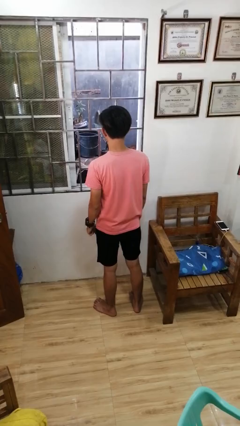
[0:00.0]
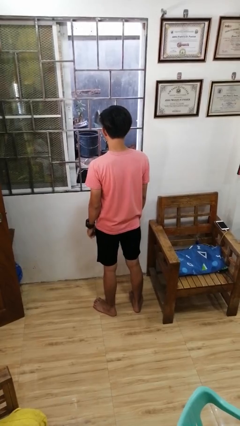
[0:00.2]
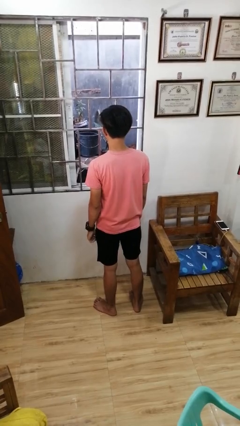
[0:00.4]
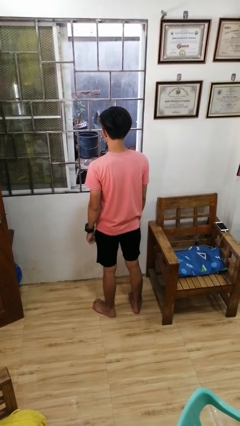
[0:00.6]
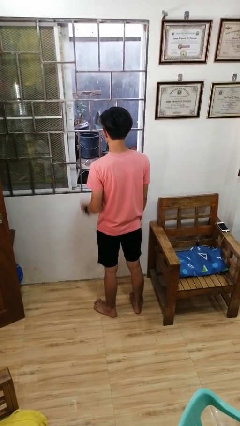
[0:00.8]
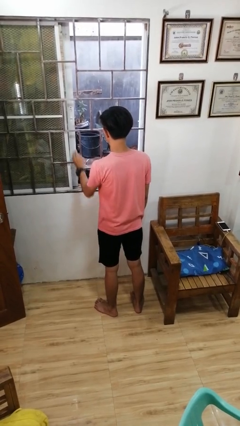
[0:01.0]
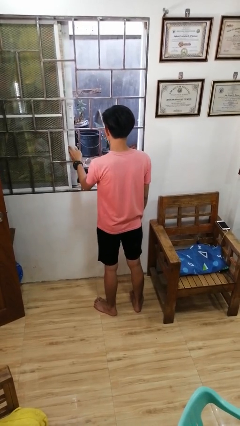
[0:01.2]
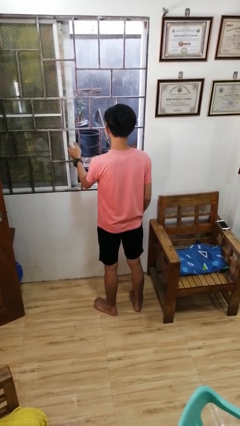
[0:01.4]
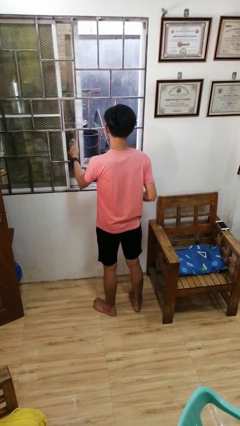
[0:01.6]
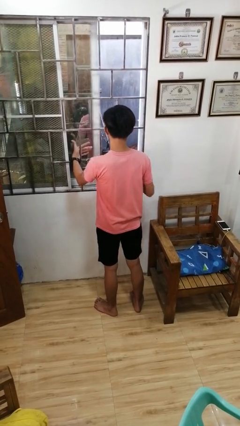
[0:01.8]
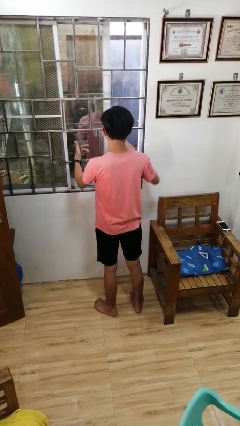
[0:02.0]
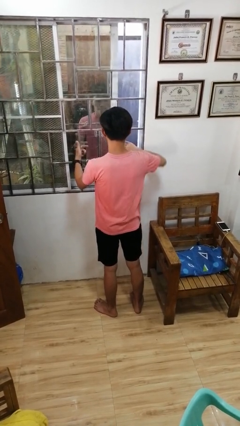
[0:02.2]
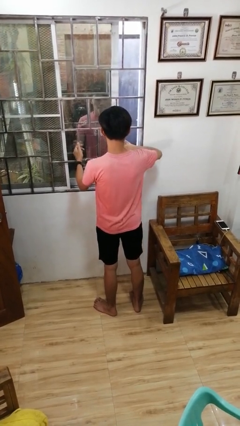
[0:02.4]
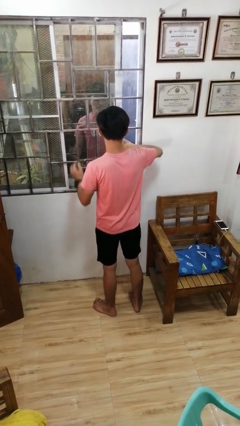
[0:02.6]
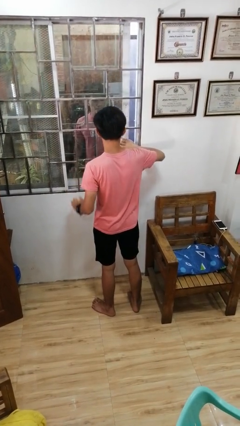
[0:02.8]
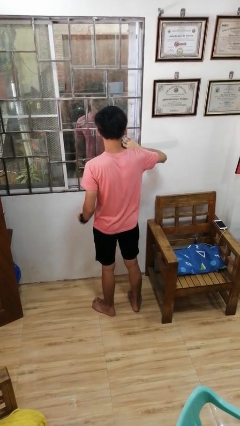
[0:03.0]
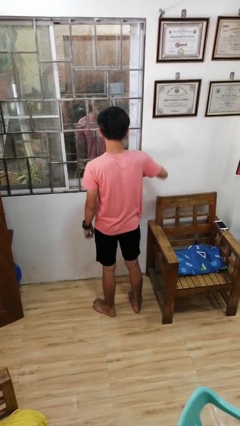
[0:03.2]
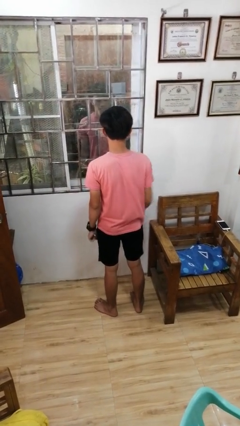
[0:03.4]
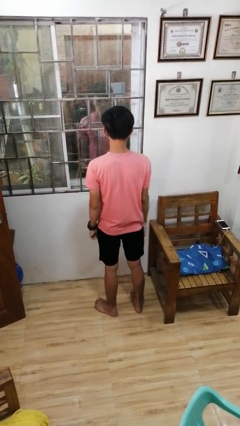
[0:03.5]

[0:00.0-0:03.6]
person closes home window

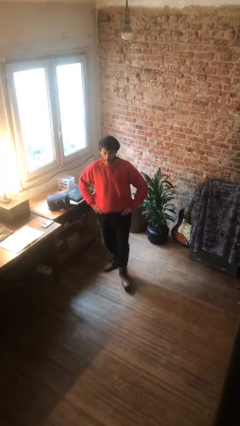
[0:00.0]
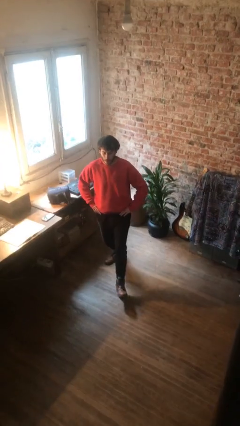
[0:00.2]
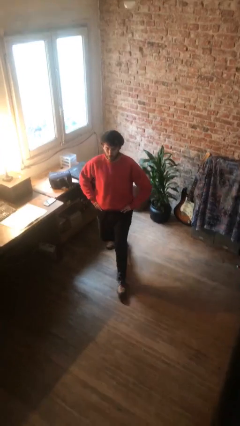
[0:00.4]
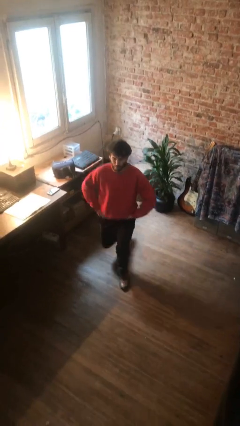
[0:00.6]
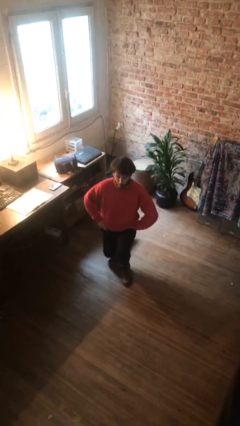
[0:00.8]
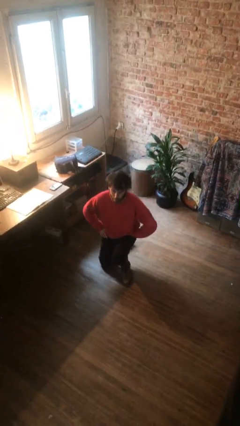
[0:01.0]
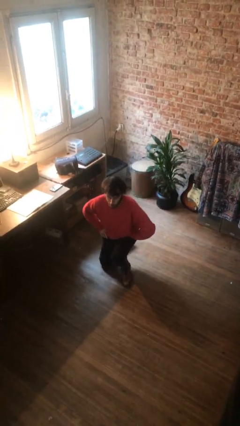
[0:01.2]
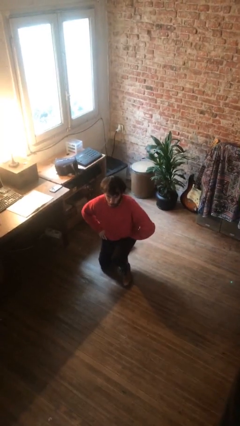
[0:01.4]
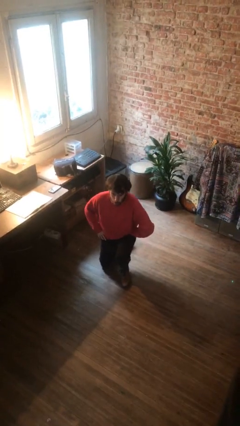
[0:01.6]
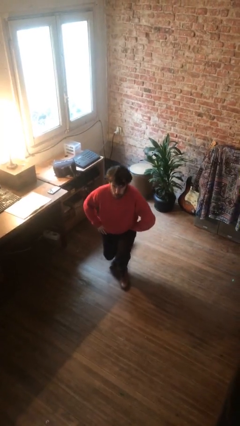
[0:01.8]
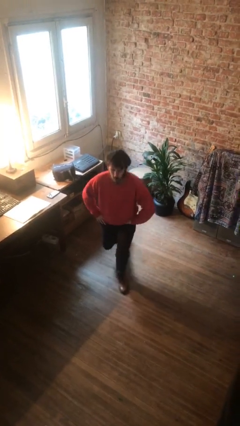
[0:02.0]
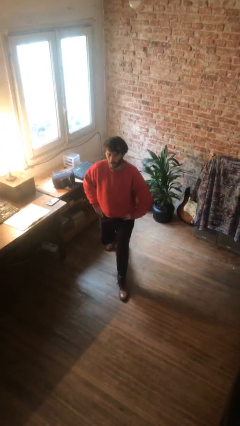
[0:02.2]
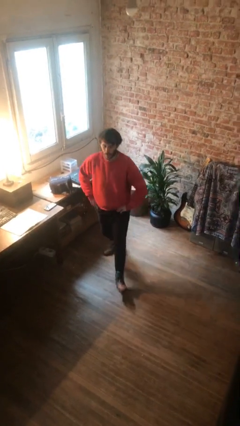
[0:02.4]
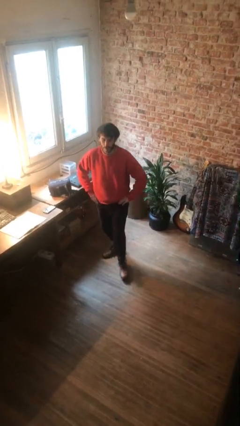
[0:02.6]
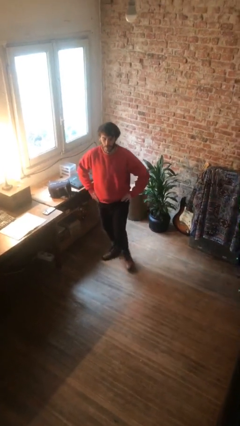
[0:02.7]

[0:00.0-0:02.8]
person exercises with lunges

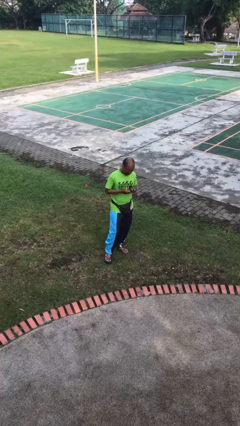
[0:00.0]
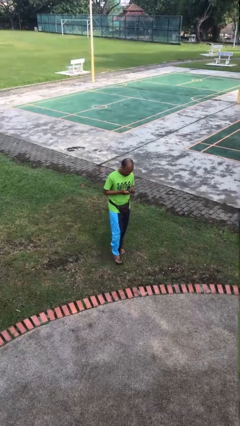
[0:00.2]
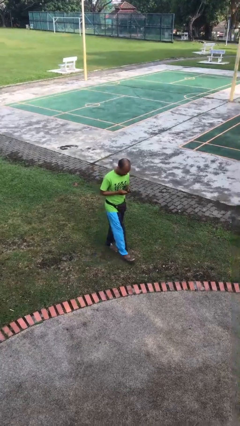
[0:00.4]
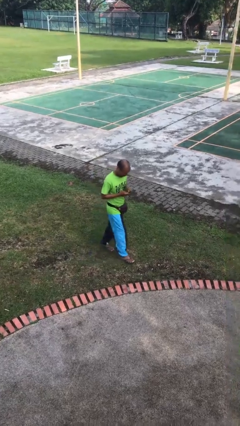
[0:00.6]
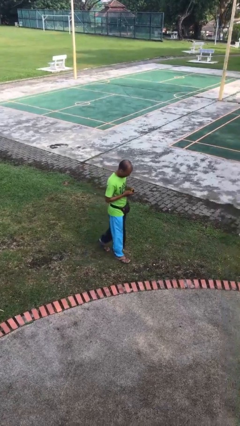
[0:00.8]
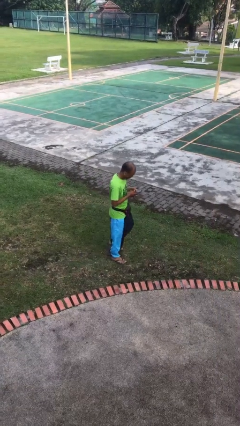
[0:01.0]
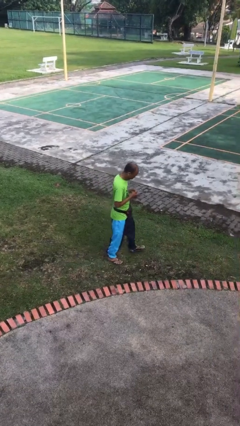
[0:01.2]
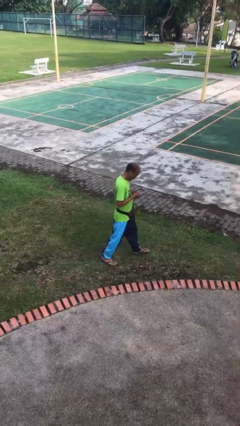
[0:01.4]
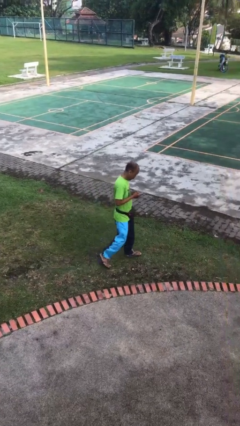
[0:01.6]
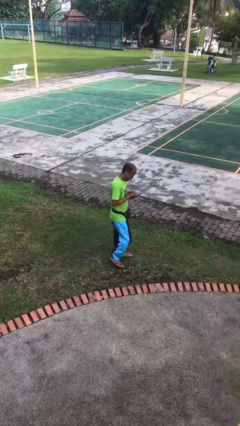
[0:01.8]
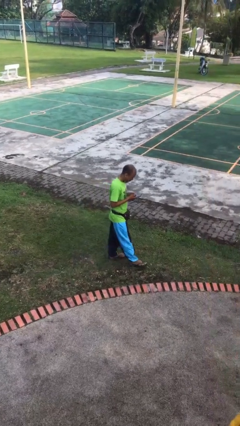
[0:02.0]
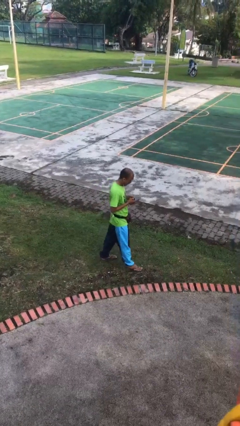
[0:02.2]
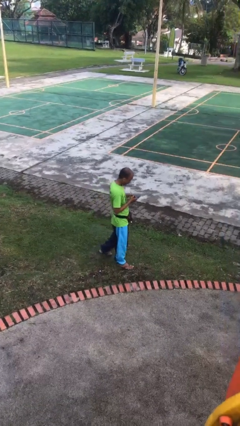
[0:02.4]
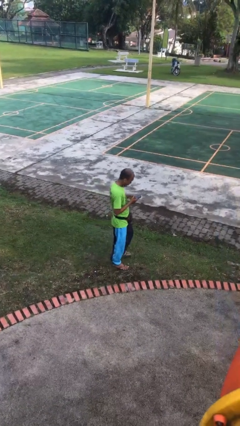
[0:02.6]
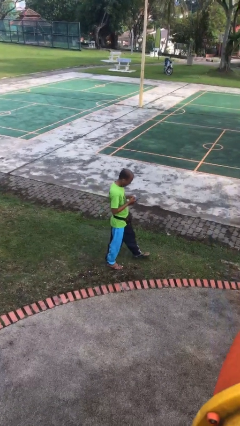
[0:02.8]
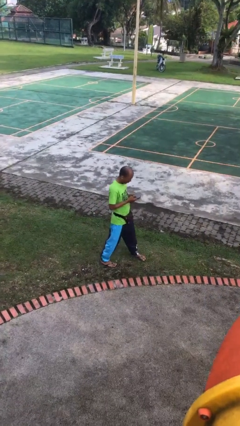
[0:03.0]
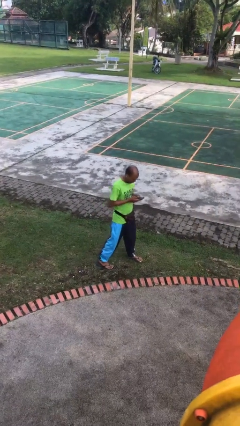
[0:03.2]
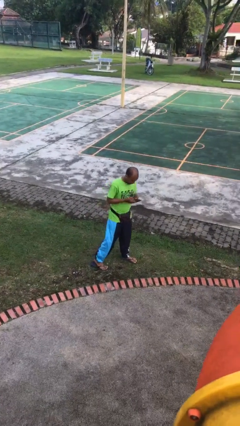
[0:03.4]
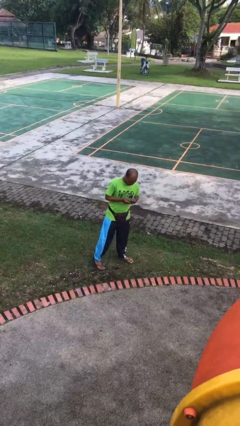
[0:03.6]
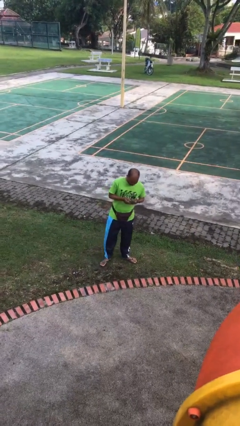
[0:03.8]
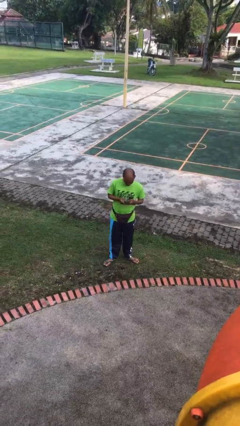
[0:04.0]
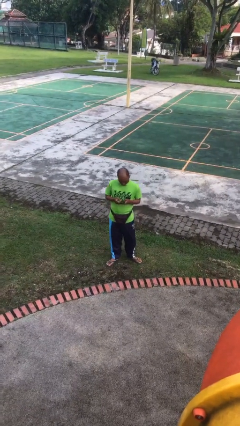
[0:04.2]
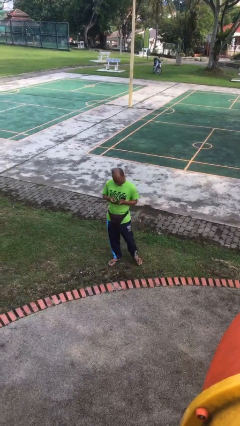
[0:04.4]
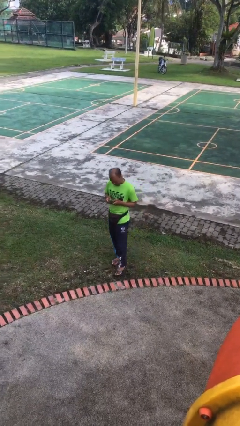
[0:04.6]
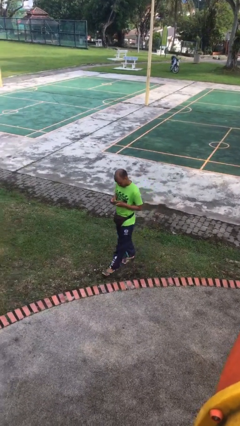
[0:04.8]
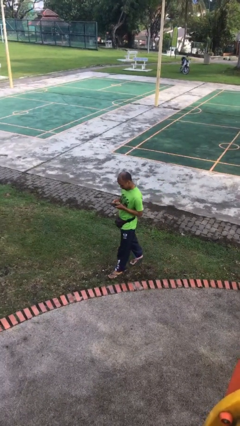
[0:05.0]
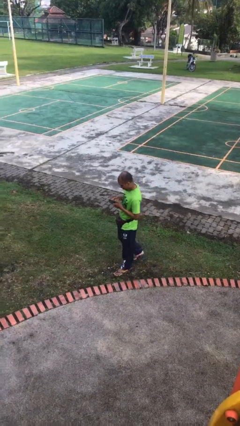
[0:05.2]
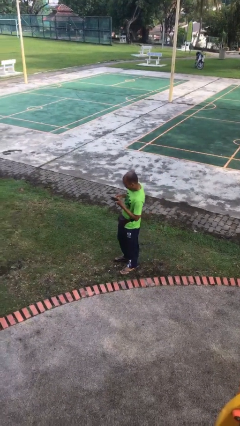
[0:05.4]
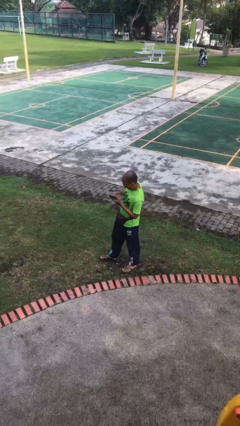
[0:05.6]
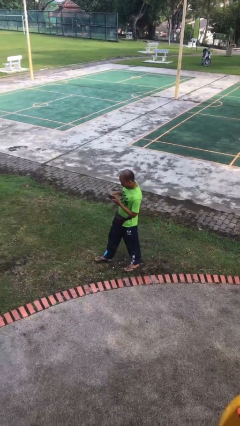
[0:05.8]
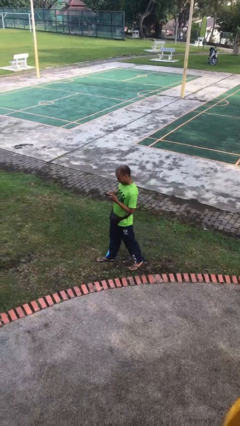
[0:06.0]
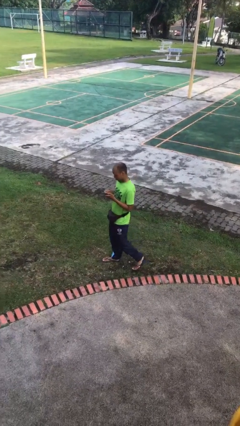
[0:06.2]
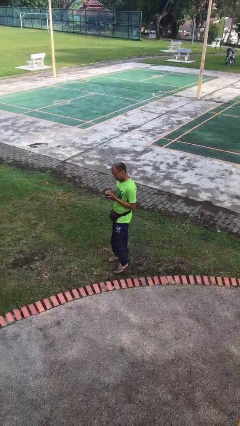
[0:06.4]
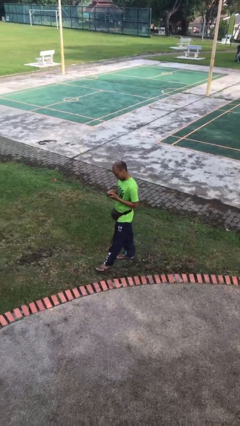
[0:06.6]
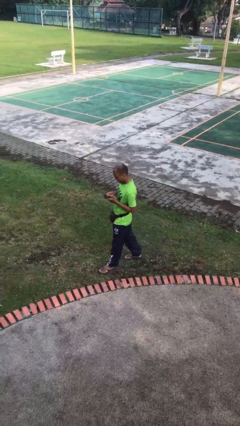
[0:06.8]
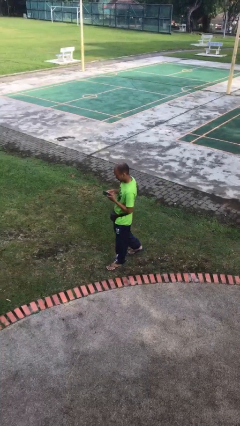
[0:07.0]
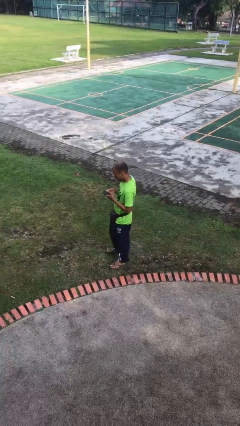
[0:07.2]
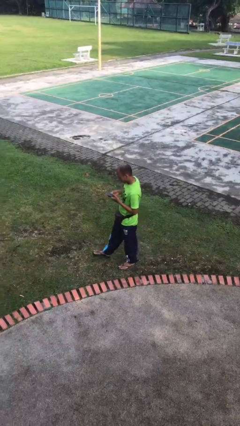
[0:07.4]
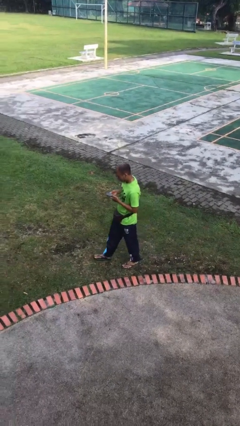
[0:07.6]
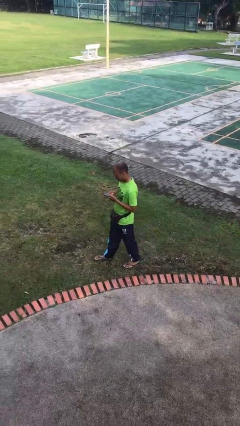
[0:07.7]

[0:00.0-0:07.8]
person texts on phone

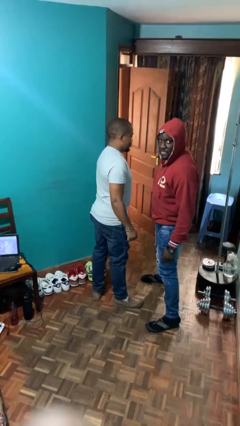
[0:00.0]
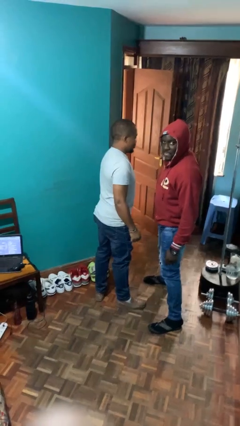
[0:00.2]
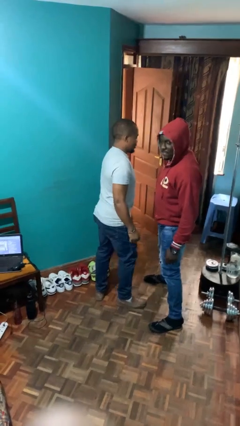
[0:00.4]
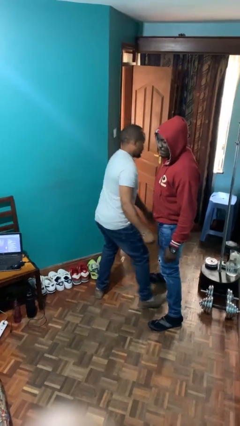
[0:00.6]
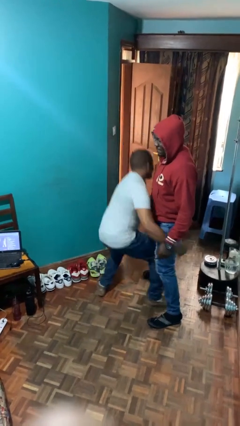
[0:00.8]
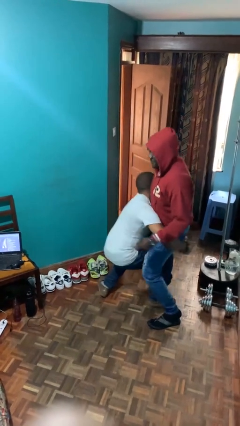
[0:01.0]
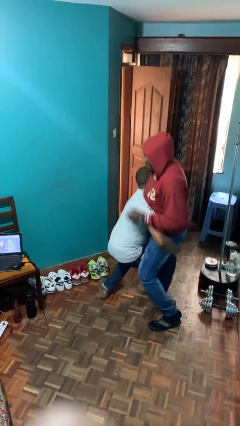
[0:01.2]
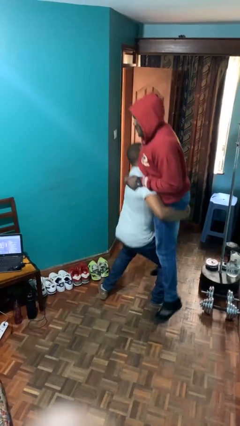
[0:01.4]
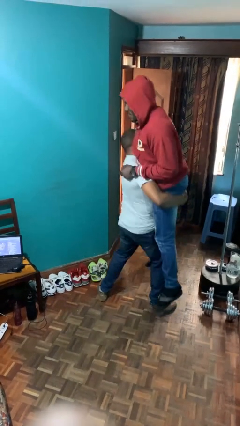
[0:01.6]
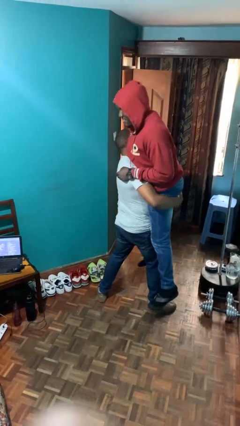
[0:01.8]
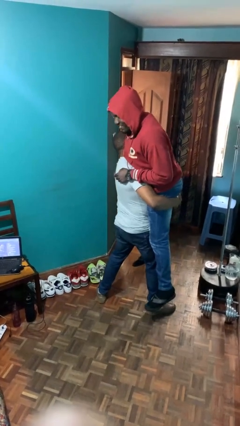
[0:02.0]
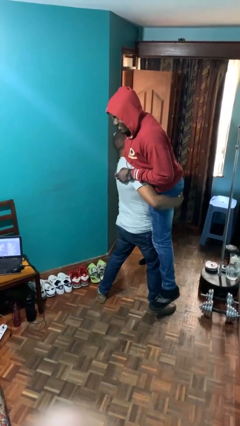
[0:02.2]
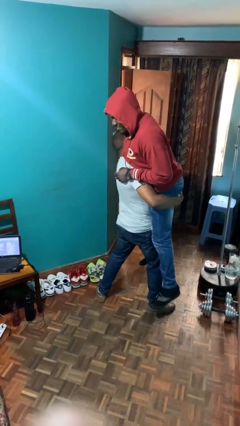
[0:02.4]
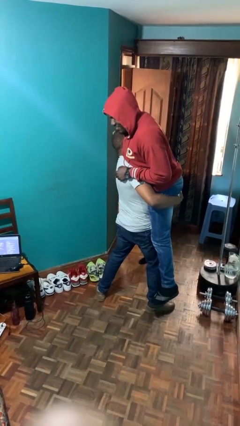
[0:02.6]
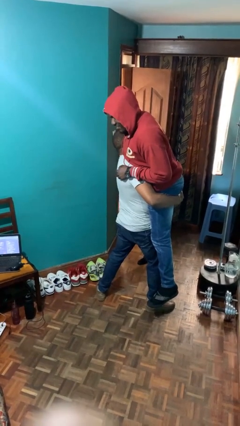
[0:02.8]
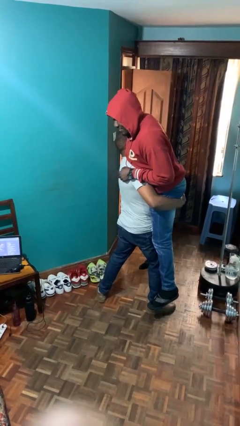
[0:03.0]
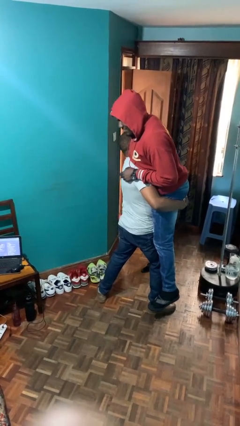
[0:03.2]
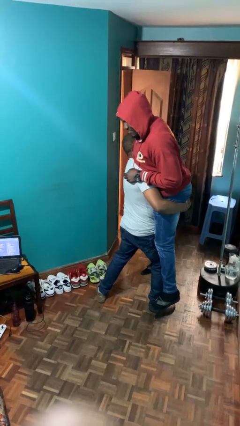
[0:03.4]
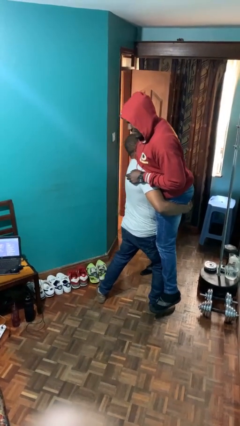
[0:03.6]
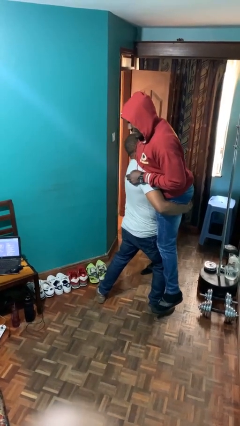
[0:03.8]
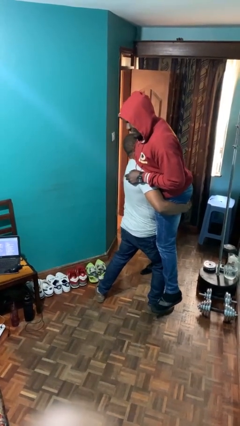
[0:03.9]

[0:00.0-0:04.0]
person picks up person

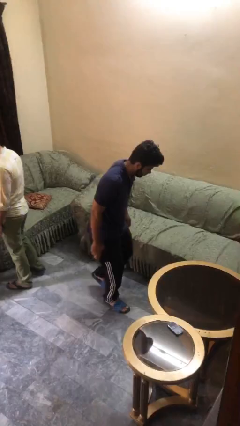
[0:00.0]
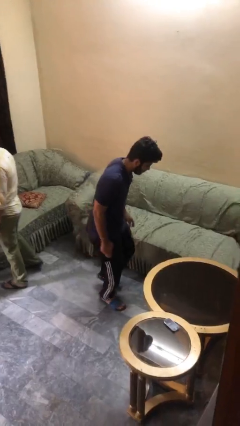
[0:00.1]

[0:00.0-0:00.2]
person steals object from person
